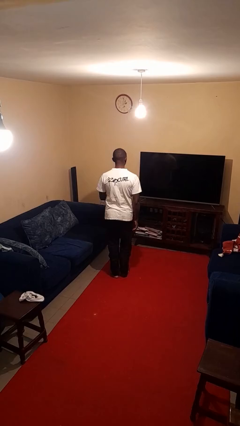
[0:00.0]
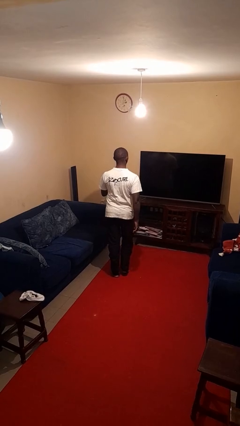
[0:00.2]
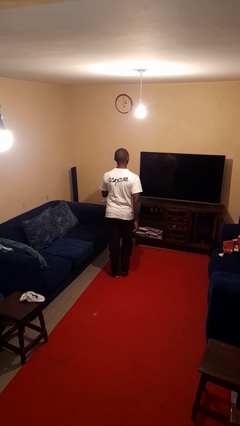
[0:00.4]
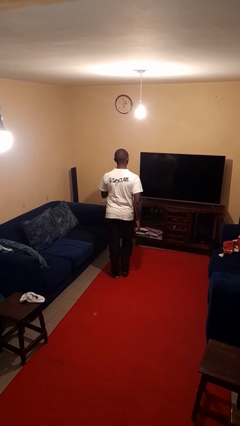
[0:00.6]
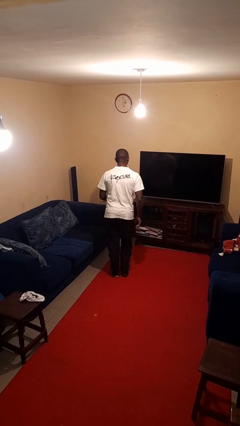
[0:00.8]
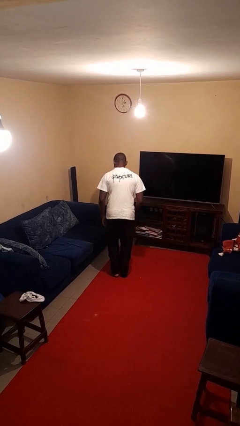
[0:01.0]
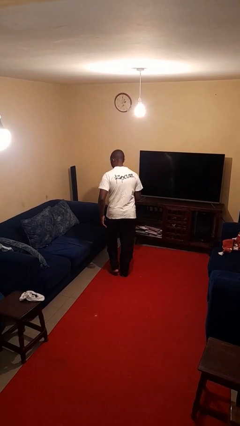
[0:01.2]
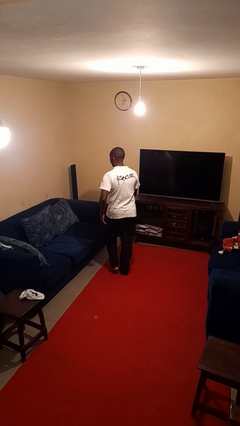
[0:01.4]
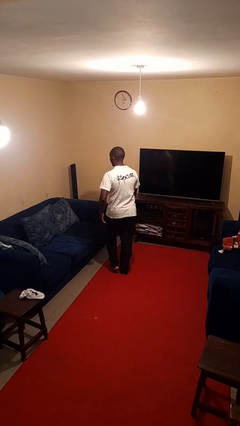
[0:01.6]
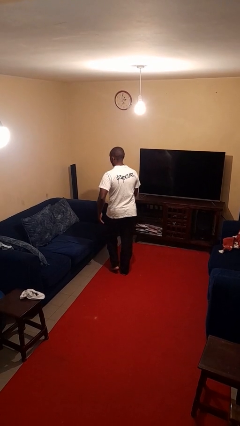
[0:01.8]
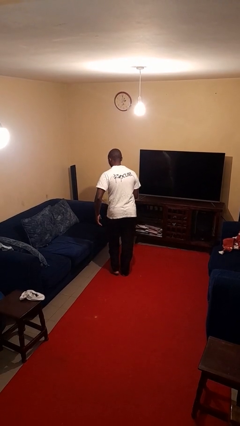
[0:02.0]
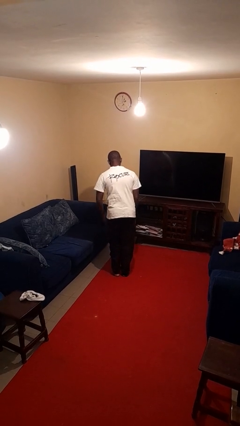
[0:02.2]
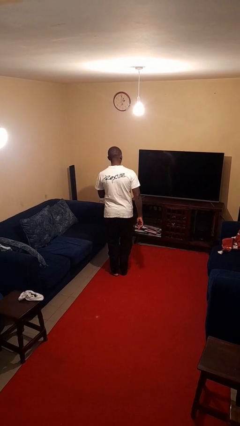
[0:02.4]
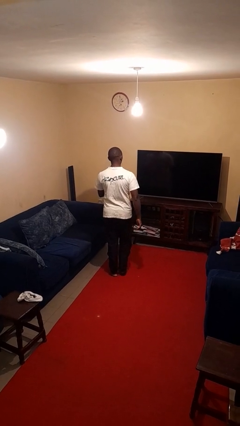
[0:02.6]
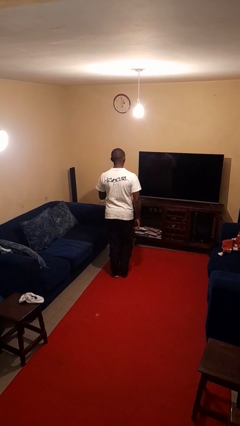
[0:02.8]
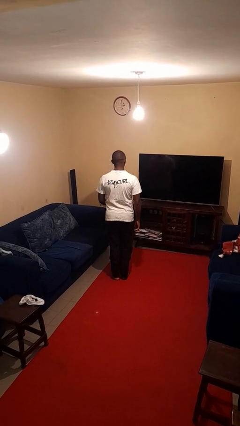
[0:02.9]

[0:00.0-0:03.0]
person dances in place

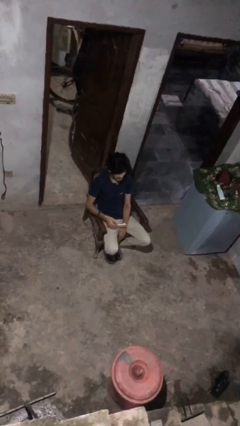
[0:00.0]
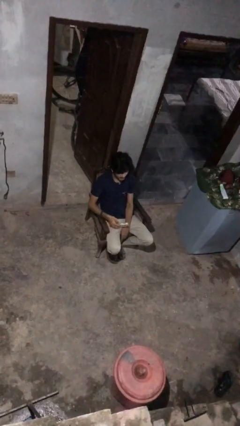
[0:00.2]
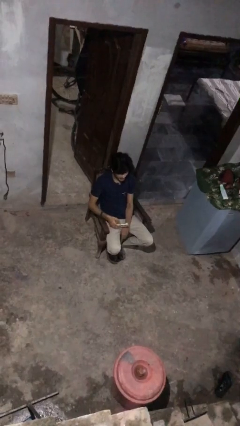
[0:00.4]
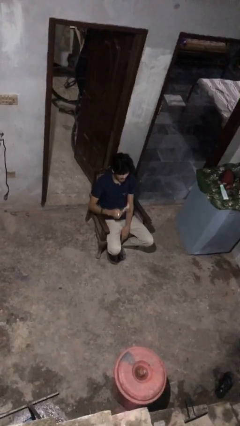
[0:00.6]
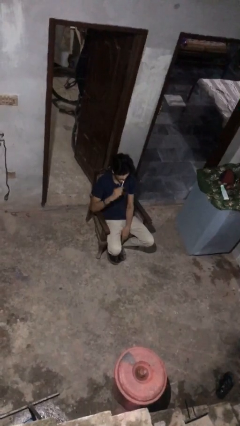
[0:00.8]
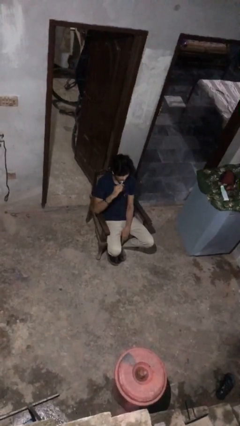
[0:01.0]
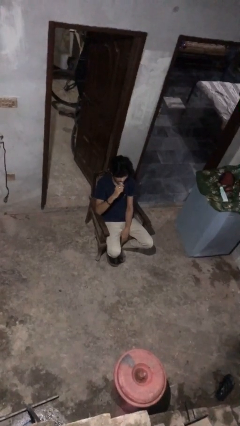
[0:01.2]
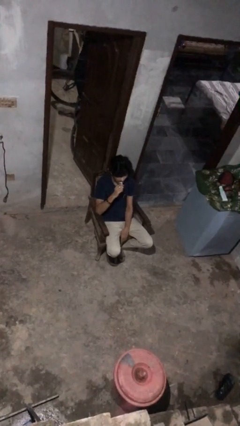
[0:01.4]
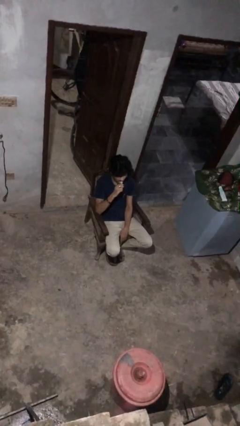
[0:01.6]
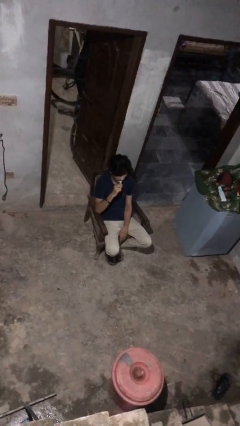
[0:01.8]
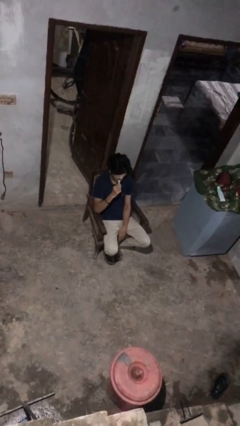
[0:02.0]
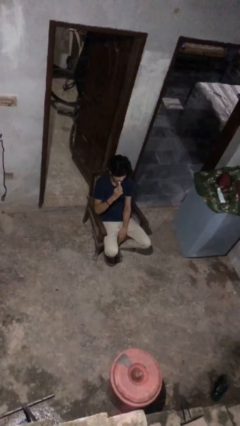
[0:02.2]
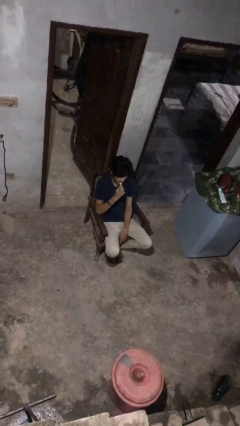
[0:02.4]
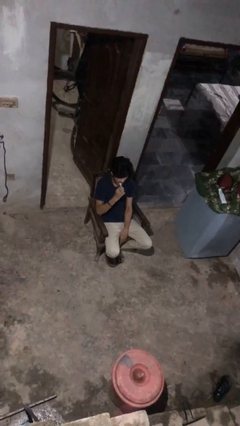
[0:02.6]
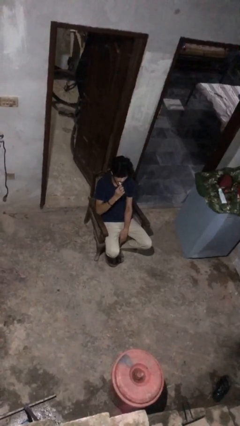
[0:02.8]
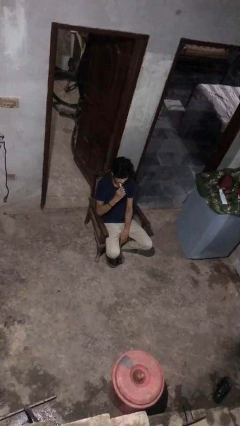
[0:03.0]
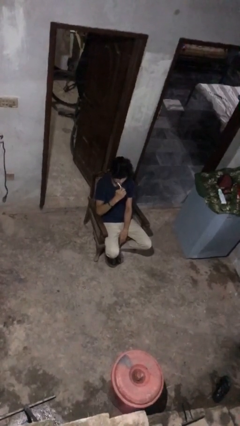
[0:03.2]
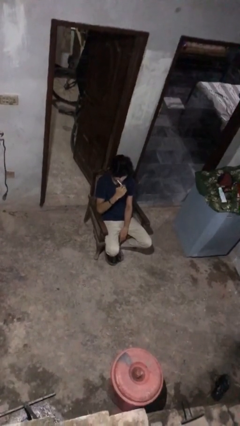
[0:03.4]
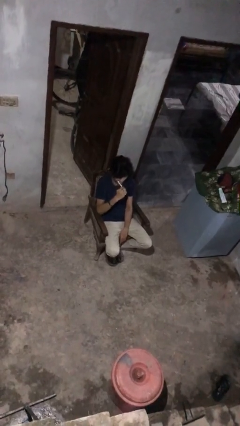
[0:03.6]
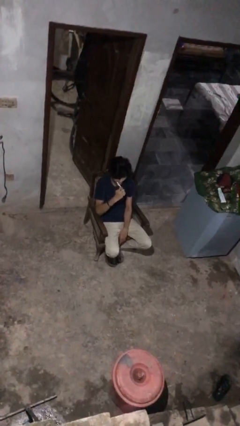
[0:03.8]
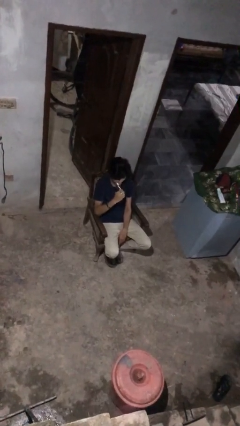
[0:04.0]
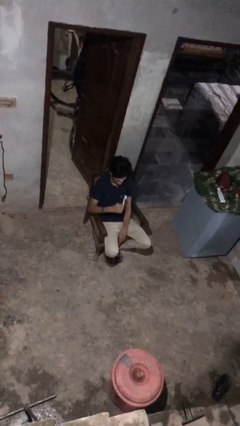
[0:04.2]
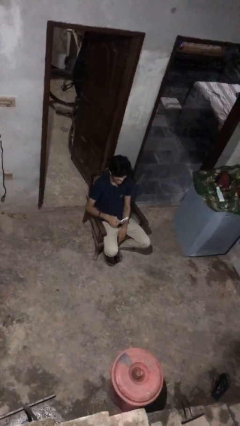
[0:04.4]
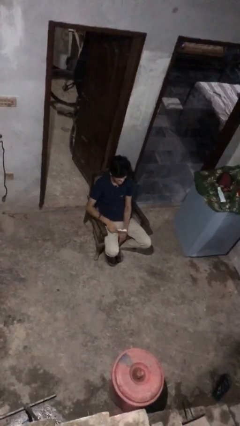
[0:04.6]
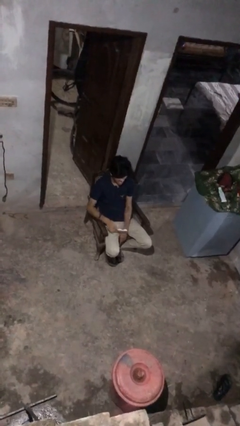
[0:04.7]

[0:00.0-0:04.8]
person brushes teeth

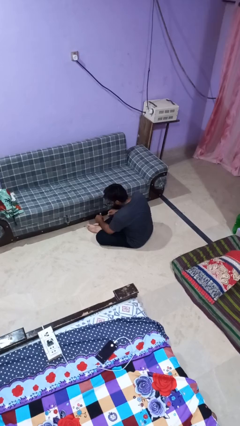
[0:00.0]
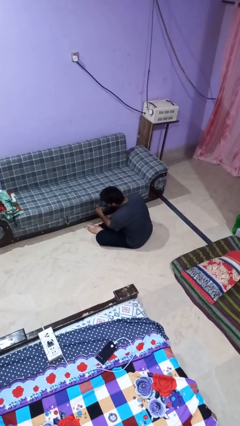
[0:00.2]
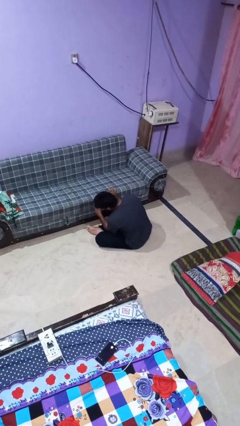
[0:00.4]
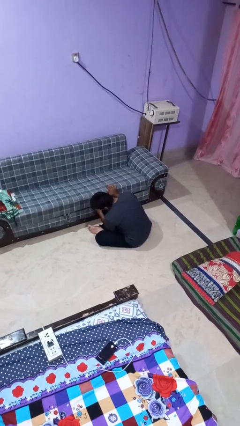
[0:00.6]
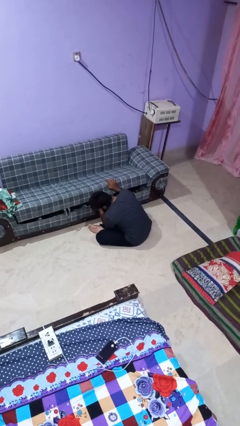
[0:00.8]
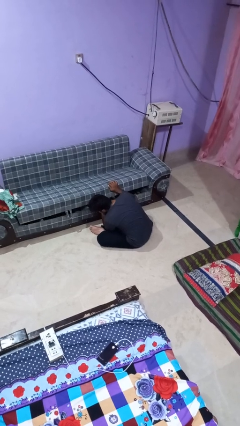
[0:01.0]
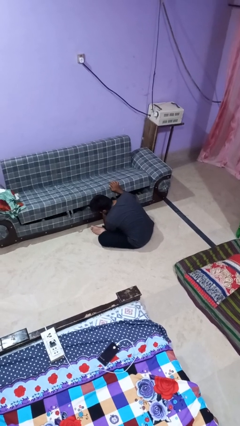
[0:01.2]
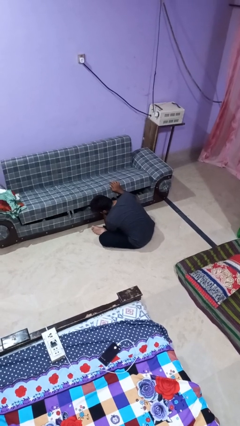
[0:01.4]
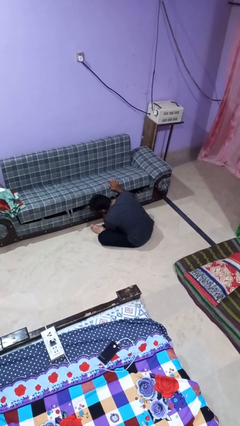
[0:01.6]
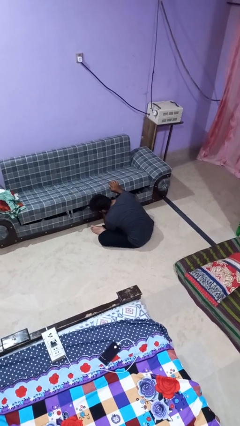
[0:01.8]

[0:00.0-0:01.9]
person searches under couch

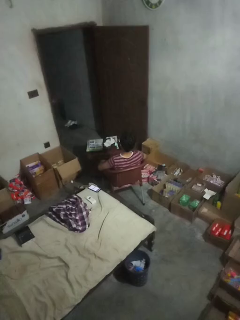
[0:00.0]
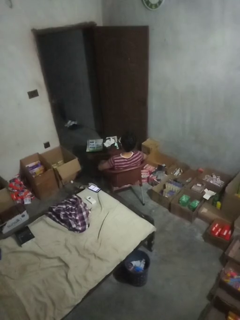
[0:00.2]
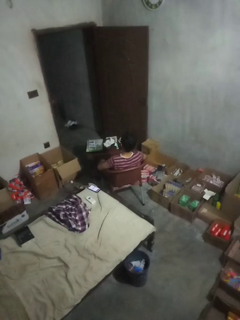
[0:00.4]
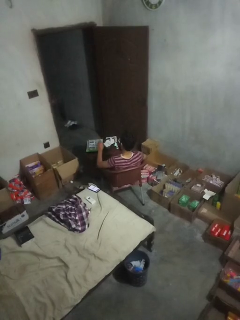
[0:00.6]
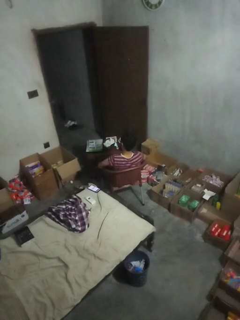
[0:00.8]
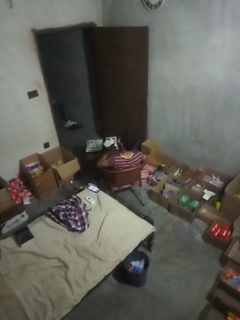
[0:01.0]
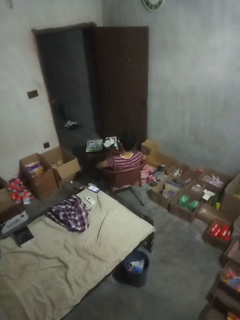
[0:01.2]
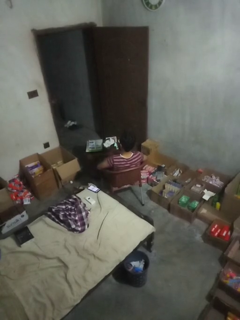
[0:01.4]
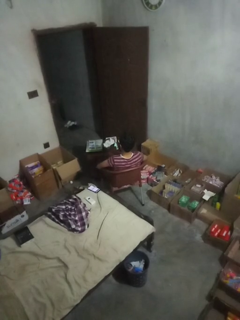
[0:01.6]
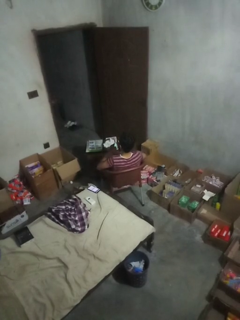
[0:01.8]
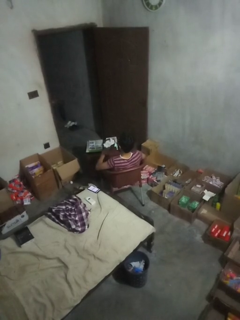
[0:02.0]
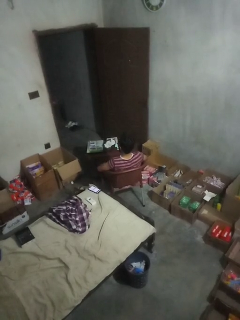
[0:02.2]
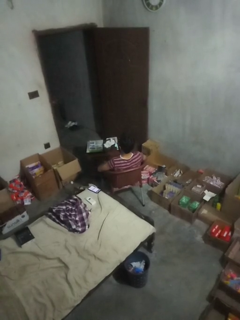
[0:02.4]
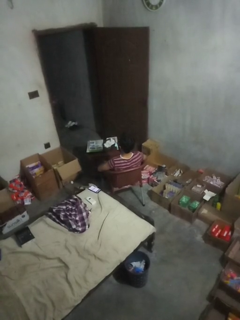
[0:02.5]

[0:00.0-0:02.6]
person slaps hands on thighs

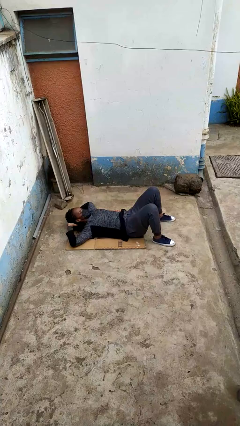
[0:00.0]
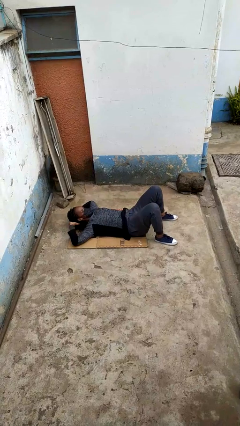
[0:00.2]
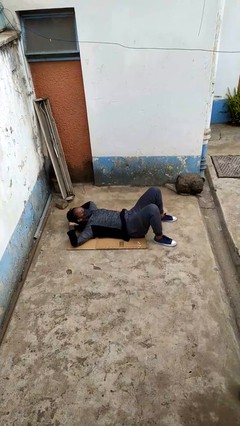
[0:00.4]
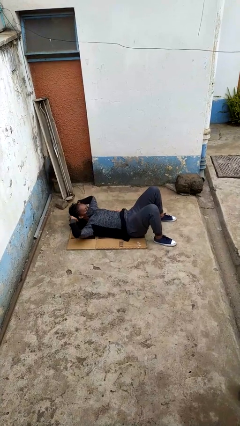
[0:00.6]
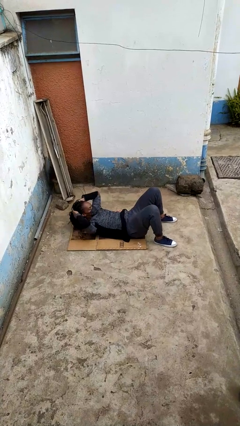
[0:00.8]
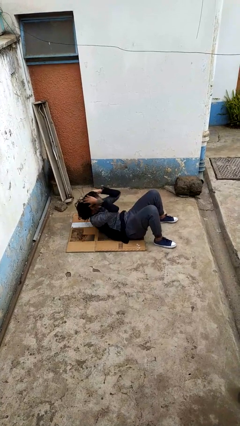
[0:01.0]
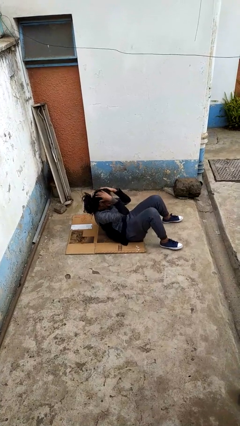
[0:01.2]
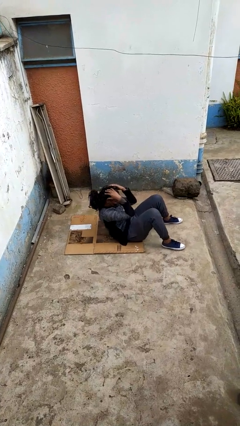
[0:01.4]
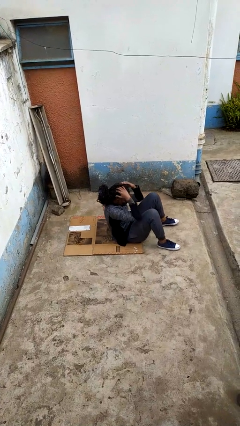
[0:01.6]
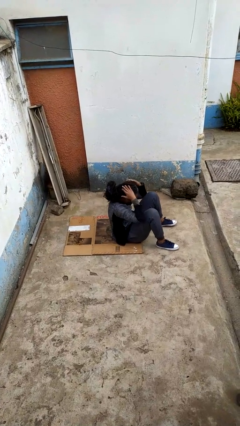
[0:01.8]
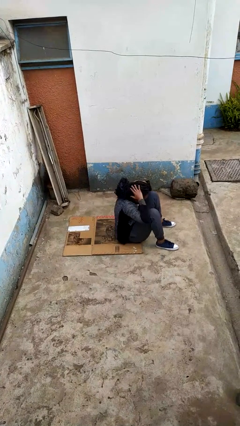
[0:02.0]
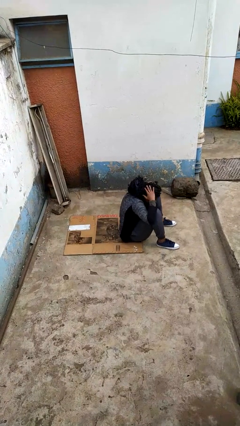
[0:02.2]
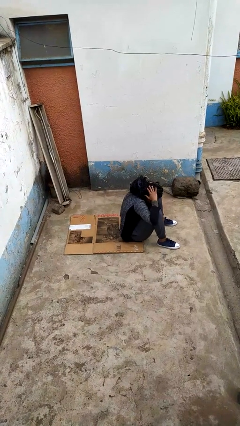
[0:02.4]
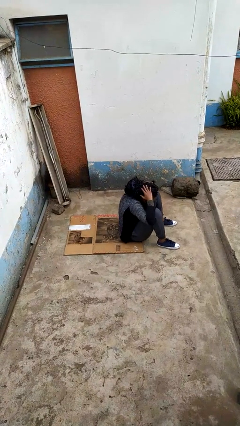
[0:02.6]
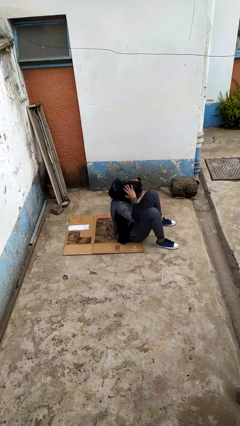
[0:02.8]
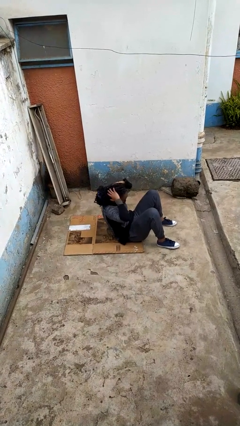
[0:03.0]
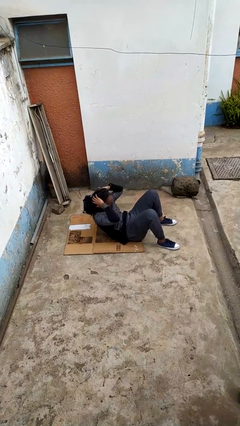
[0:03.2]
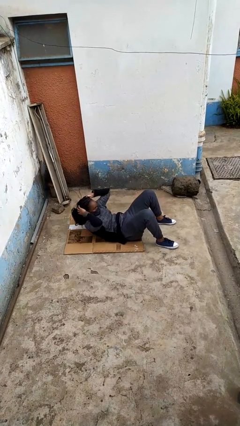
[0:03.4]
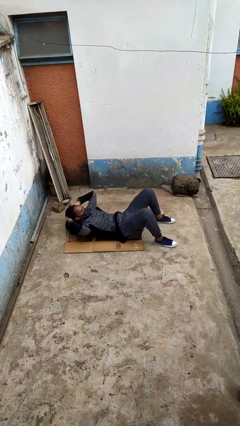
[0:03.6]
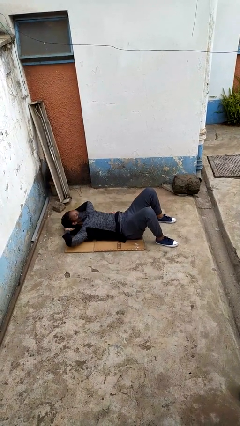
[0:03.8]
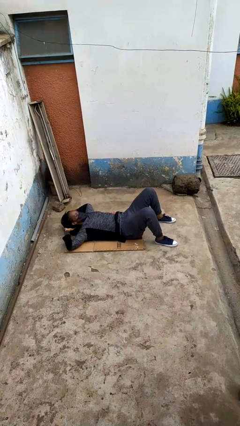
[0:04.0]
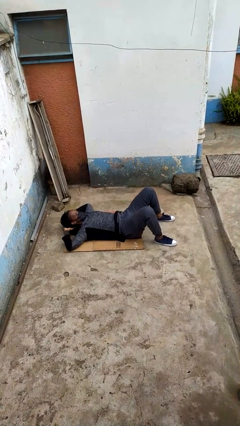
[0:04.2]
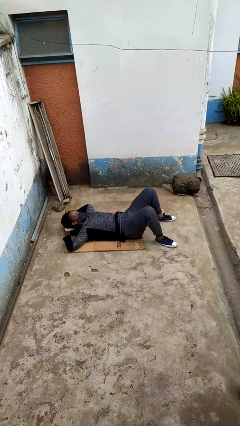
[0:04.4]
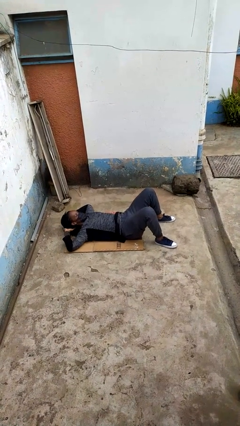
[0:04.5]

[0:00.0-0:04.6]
person exercises with situp

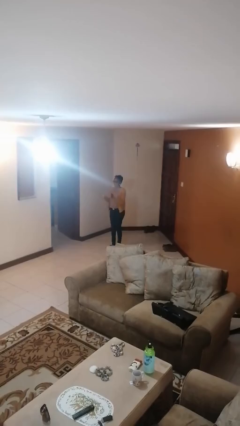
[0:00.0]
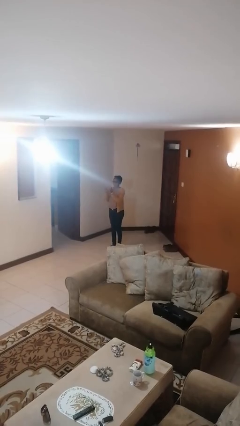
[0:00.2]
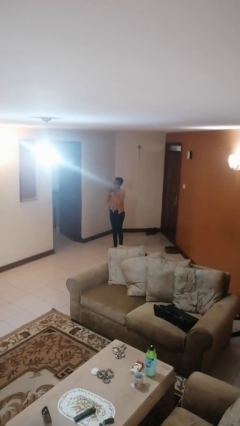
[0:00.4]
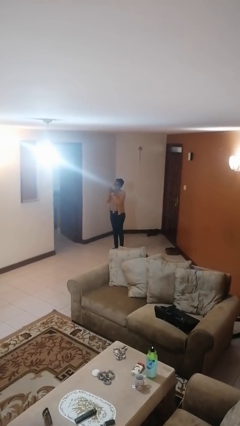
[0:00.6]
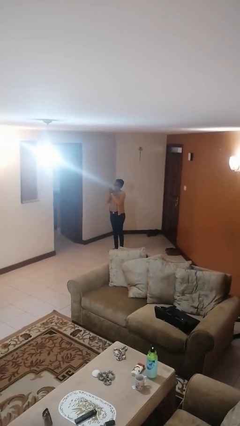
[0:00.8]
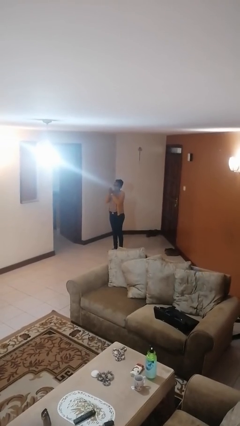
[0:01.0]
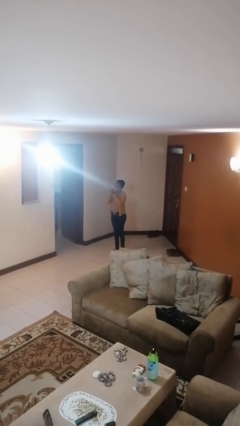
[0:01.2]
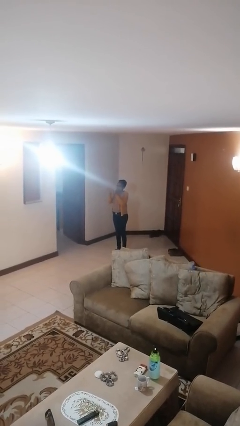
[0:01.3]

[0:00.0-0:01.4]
person claps hands
